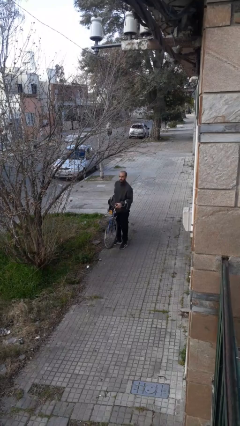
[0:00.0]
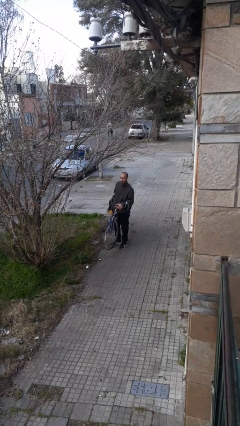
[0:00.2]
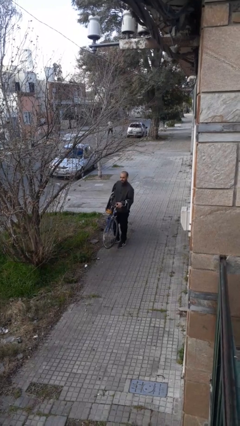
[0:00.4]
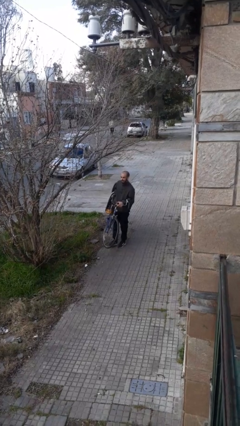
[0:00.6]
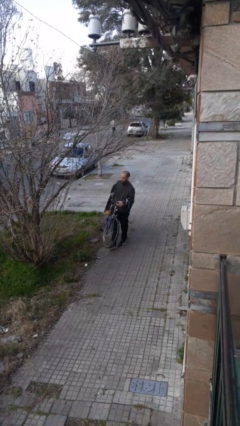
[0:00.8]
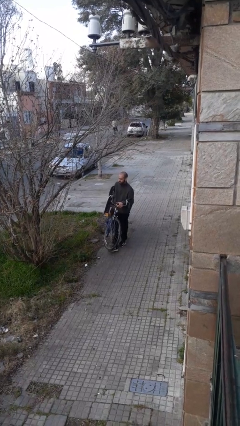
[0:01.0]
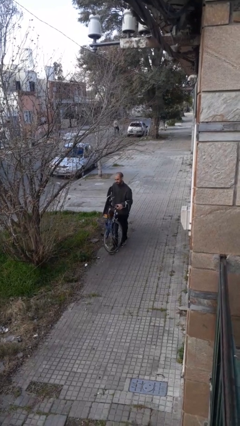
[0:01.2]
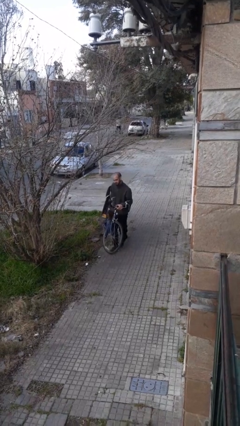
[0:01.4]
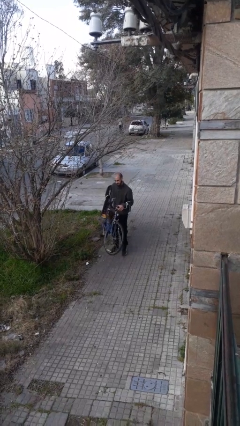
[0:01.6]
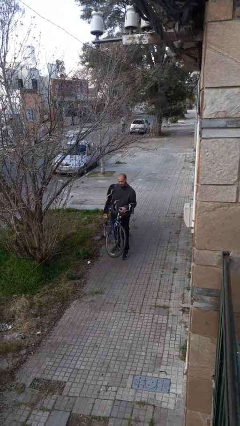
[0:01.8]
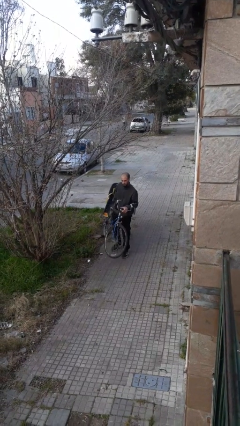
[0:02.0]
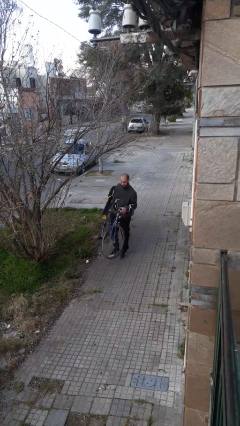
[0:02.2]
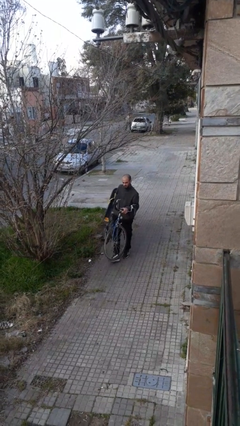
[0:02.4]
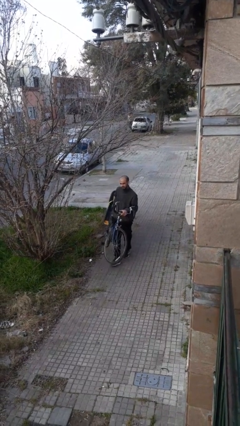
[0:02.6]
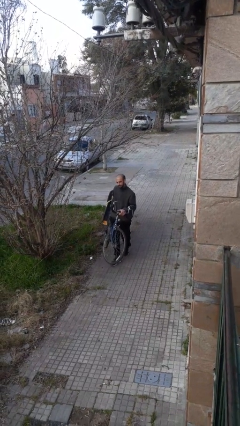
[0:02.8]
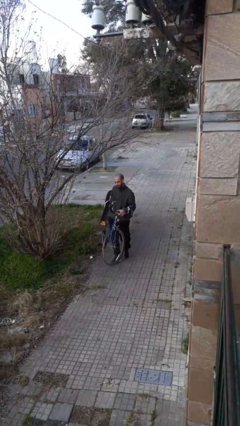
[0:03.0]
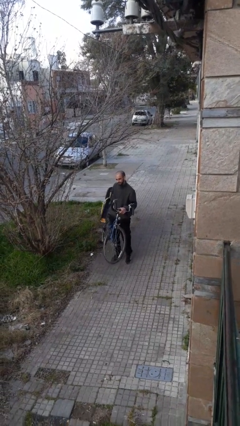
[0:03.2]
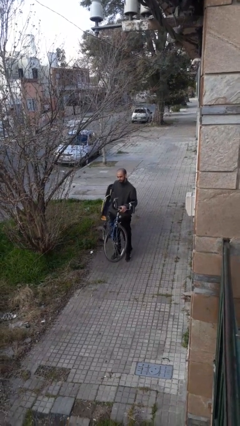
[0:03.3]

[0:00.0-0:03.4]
person carries bicycle

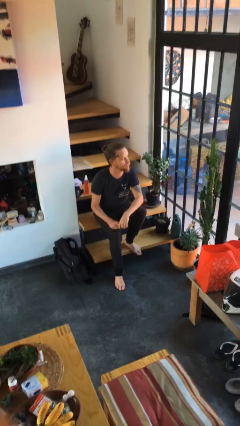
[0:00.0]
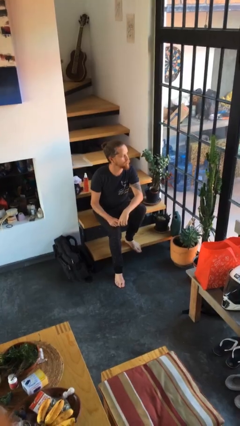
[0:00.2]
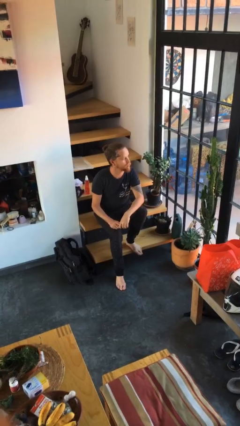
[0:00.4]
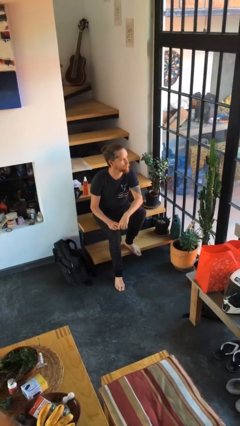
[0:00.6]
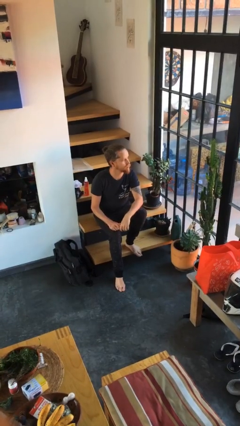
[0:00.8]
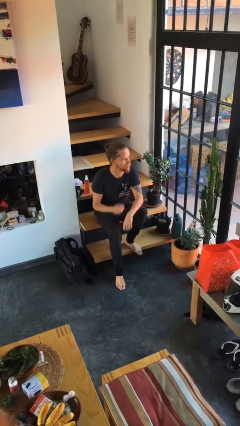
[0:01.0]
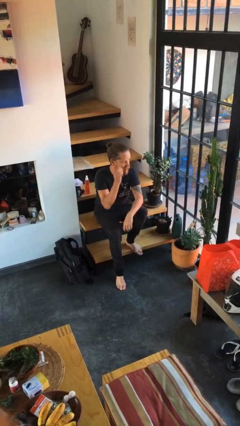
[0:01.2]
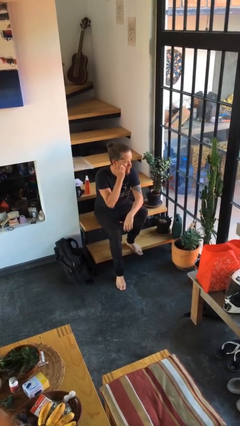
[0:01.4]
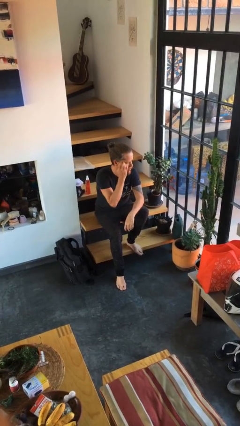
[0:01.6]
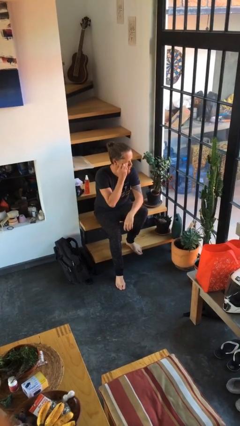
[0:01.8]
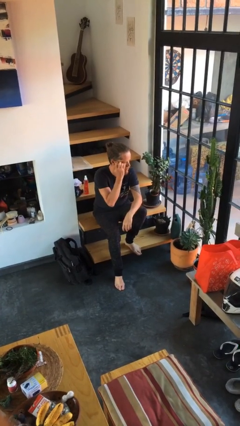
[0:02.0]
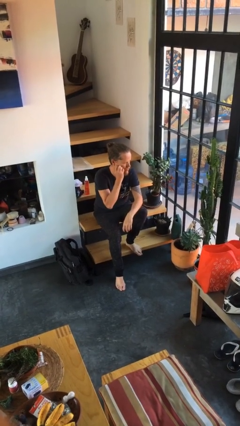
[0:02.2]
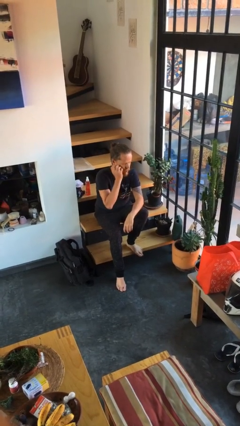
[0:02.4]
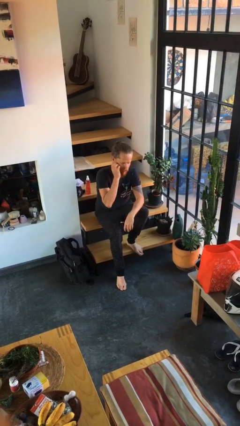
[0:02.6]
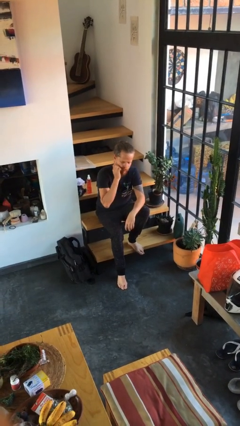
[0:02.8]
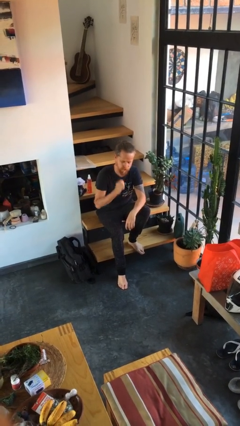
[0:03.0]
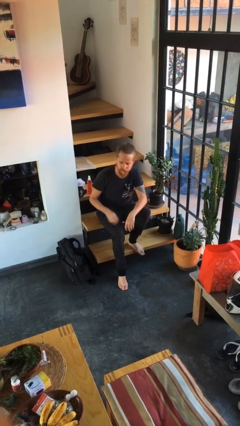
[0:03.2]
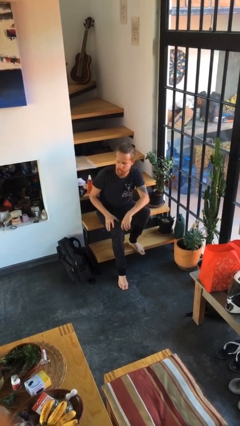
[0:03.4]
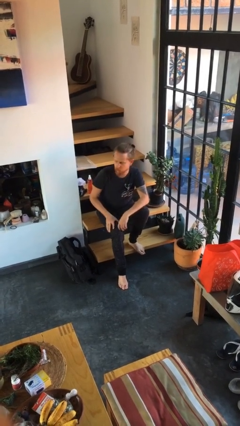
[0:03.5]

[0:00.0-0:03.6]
person scratches face

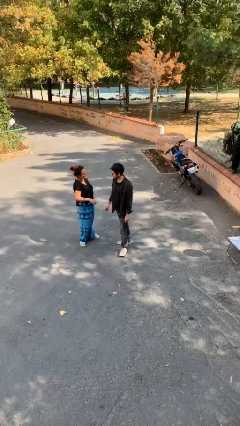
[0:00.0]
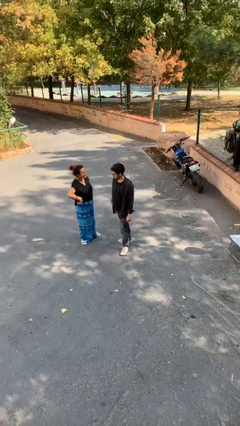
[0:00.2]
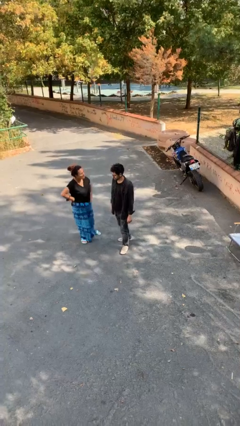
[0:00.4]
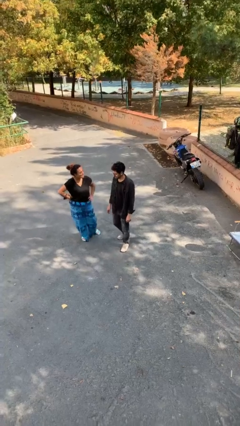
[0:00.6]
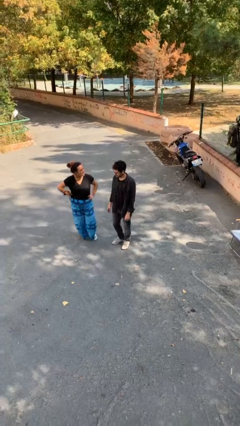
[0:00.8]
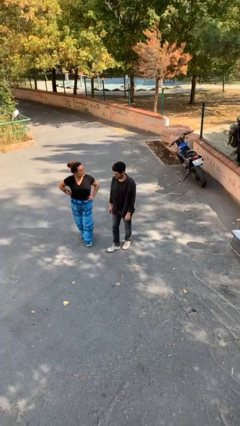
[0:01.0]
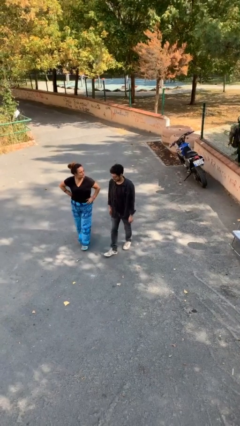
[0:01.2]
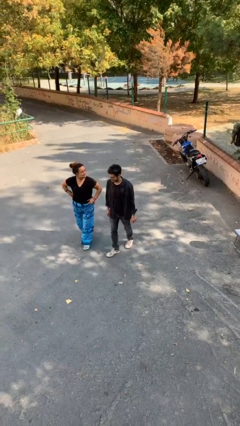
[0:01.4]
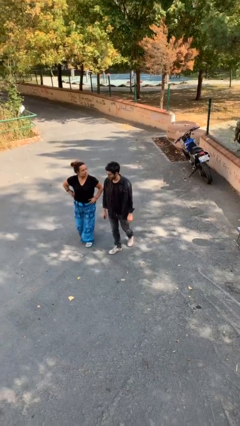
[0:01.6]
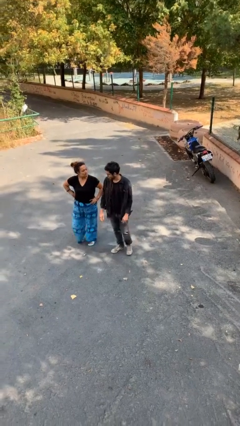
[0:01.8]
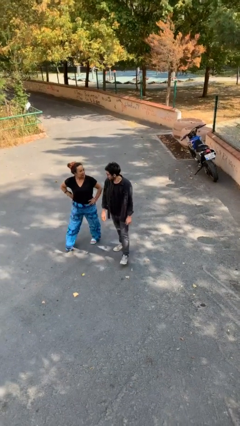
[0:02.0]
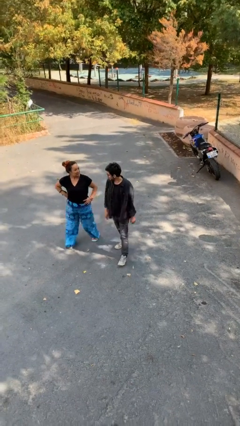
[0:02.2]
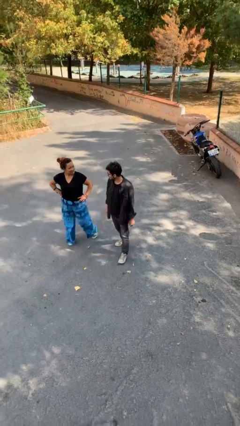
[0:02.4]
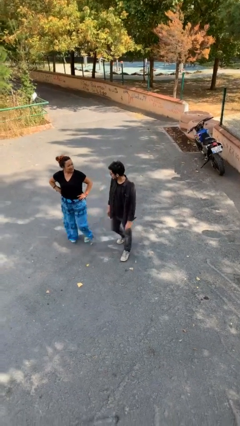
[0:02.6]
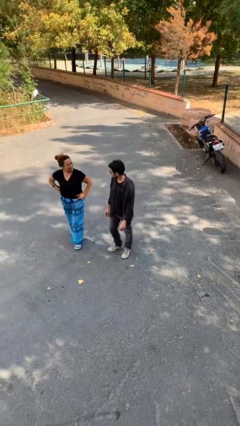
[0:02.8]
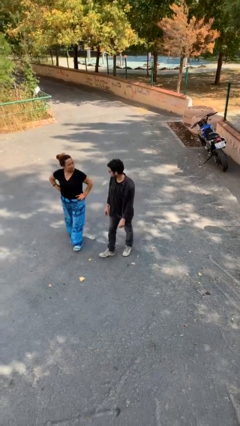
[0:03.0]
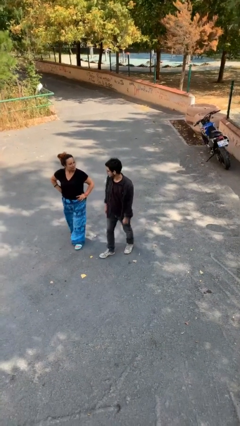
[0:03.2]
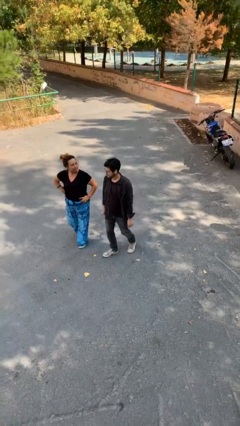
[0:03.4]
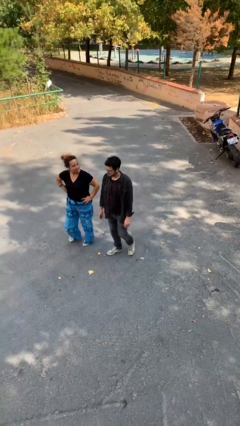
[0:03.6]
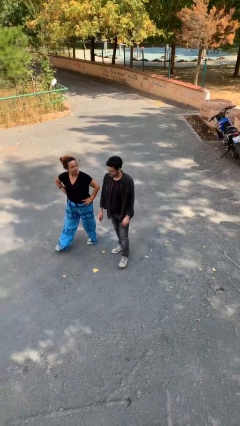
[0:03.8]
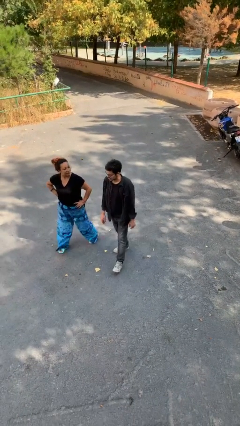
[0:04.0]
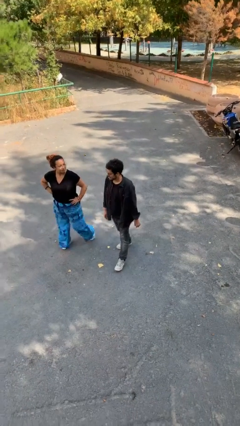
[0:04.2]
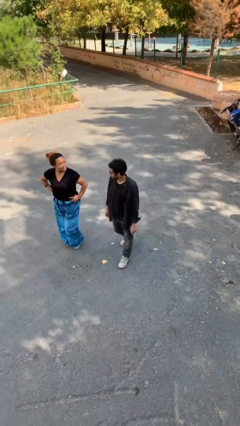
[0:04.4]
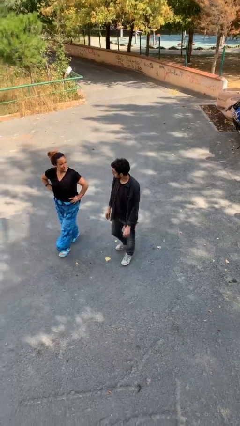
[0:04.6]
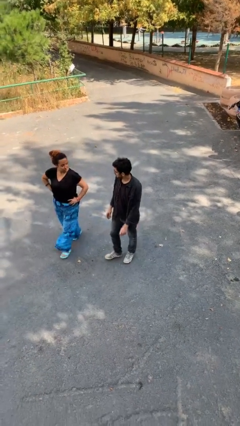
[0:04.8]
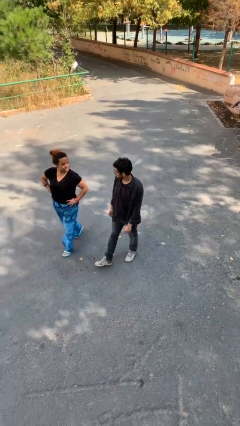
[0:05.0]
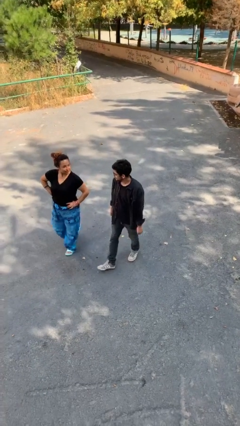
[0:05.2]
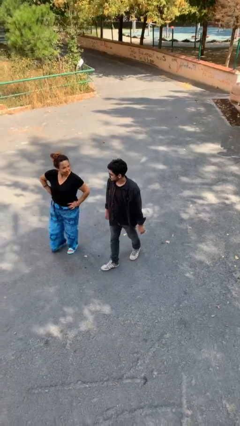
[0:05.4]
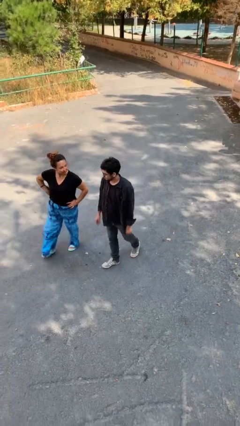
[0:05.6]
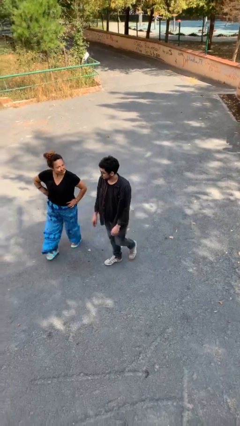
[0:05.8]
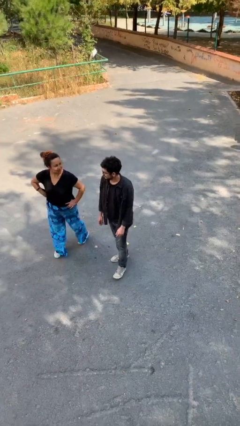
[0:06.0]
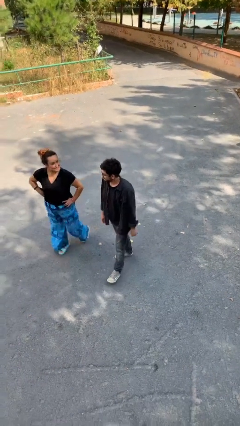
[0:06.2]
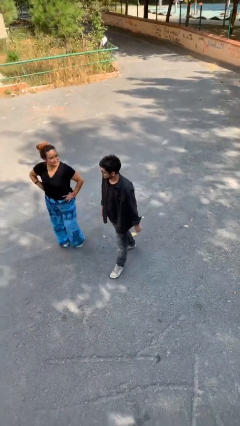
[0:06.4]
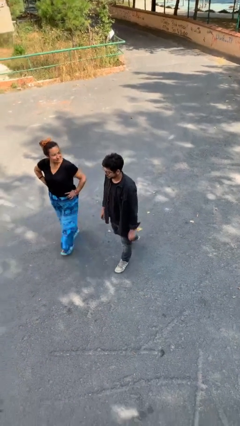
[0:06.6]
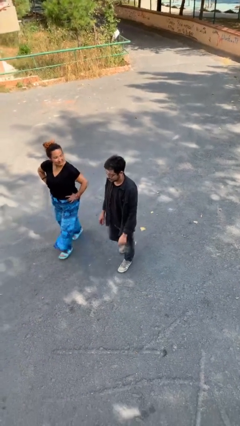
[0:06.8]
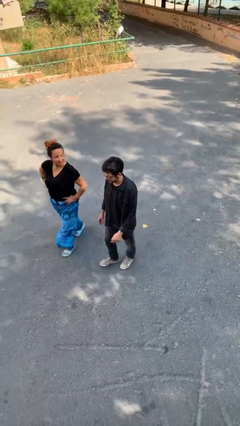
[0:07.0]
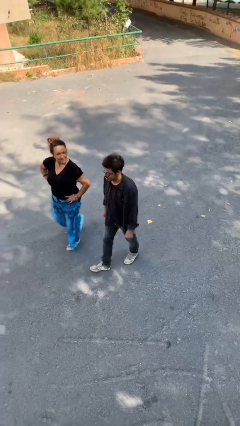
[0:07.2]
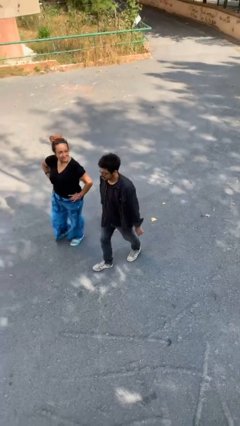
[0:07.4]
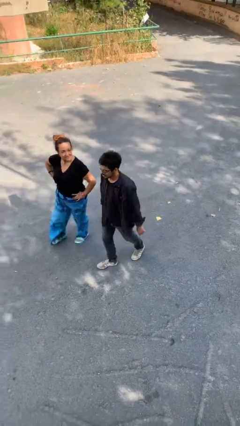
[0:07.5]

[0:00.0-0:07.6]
person talks to person

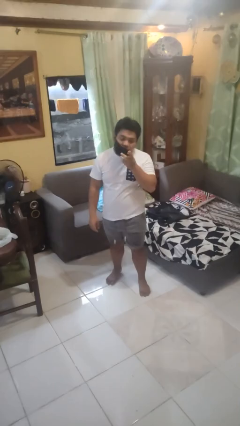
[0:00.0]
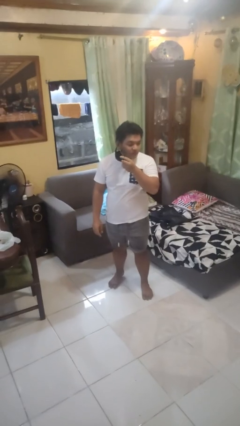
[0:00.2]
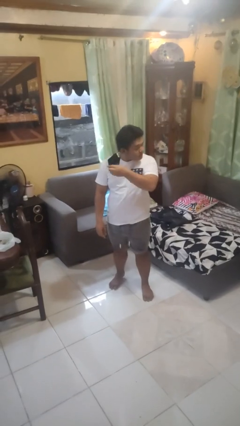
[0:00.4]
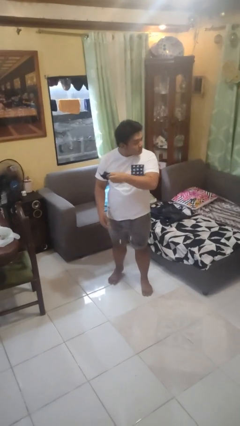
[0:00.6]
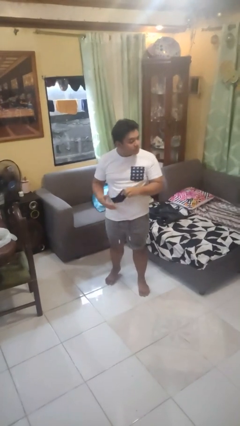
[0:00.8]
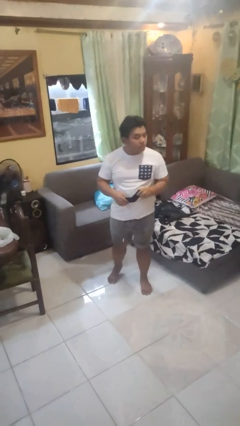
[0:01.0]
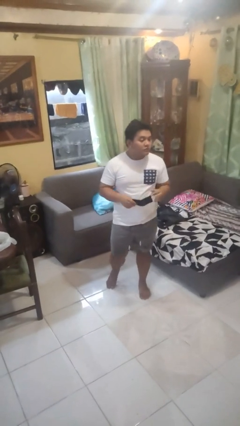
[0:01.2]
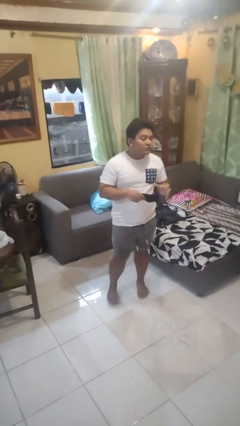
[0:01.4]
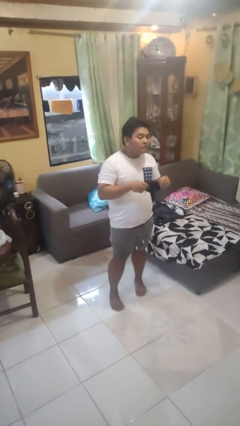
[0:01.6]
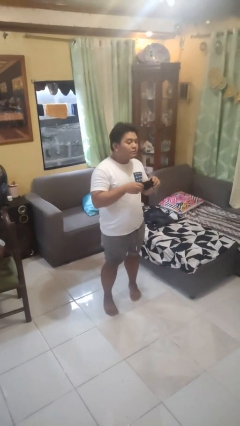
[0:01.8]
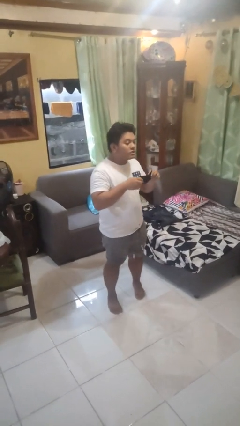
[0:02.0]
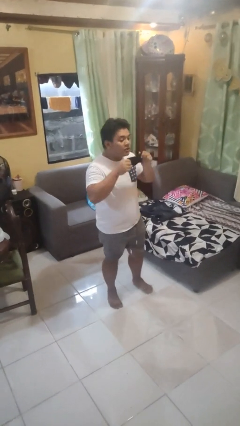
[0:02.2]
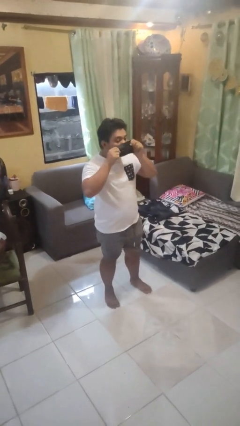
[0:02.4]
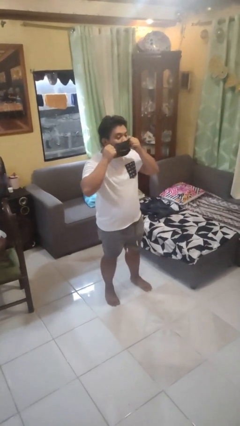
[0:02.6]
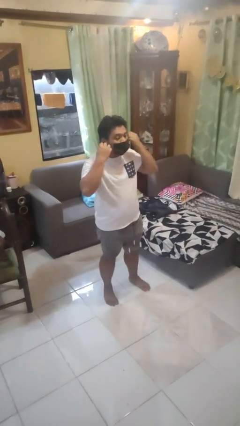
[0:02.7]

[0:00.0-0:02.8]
person takes off facemask

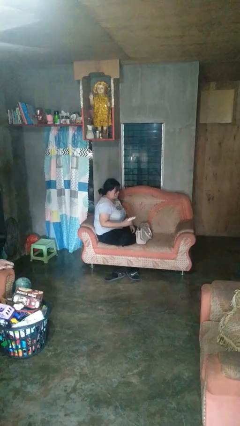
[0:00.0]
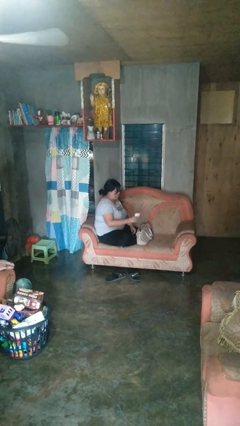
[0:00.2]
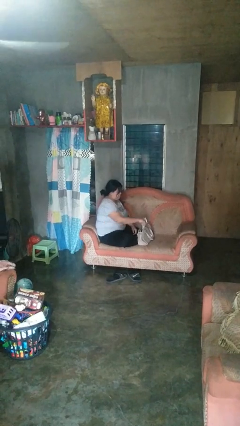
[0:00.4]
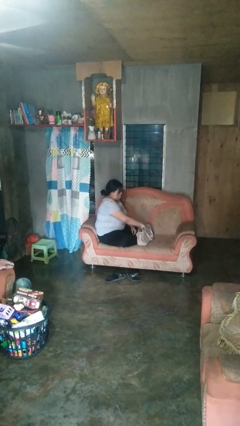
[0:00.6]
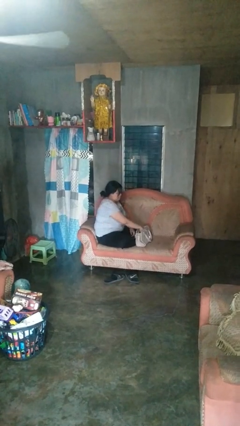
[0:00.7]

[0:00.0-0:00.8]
person puts object into purse
